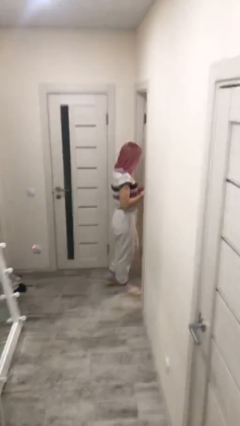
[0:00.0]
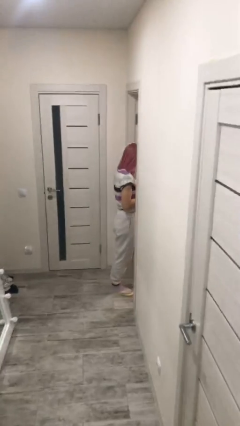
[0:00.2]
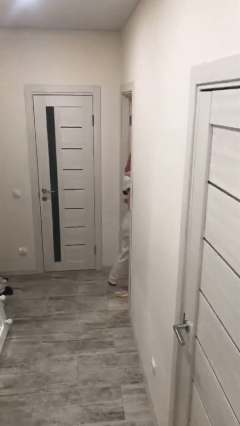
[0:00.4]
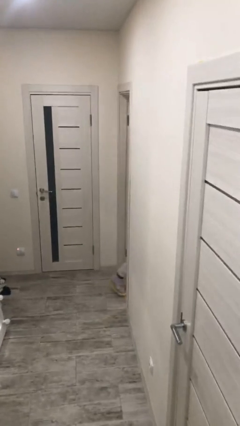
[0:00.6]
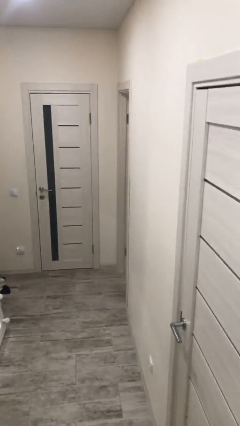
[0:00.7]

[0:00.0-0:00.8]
person enters scene through structure

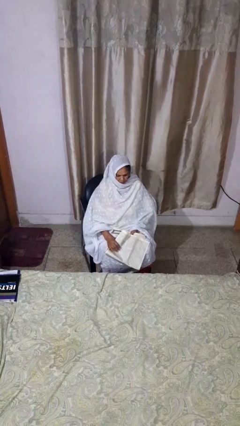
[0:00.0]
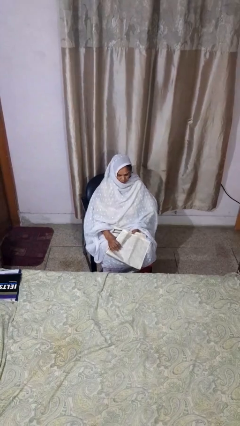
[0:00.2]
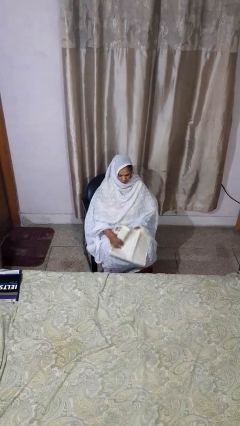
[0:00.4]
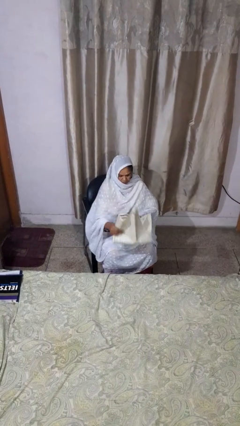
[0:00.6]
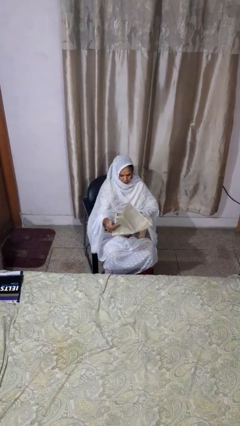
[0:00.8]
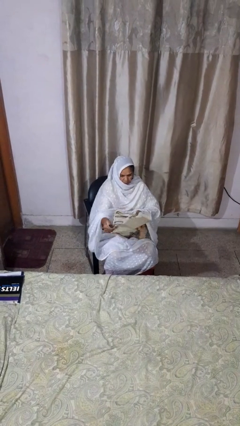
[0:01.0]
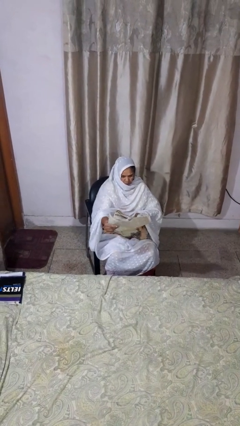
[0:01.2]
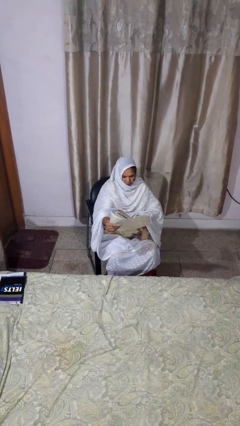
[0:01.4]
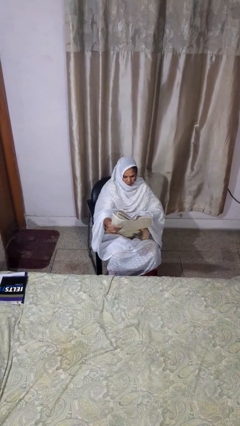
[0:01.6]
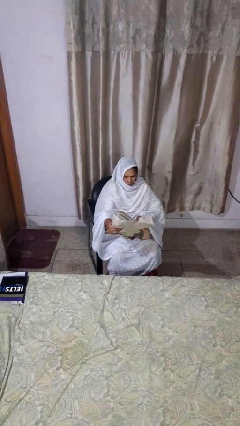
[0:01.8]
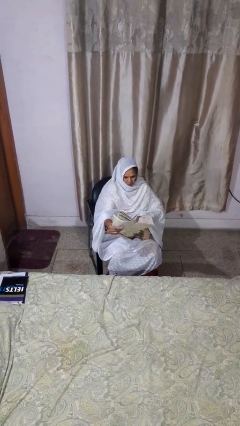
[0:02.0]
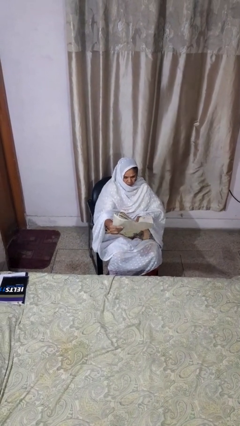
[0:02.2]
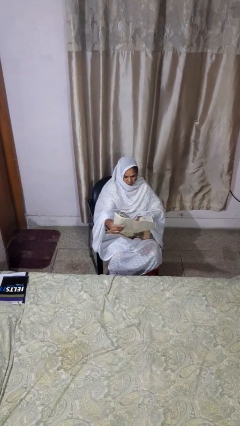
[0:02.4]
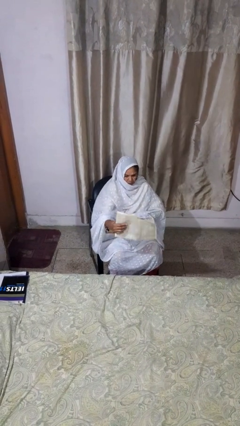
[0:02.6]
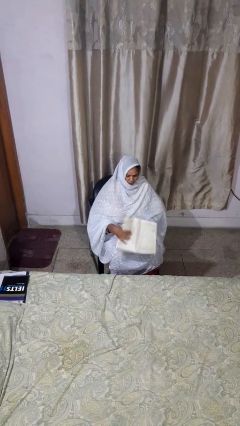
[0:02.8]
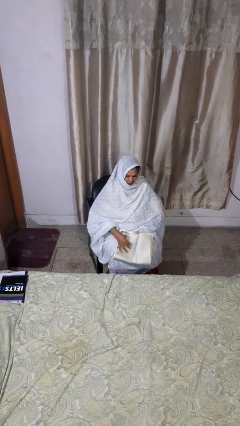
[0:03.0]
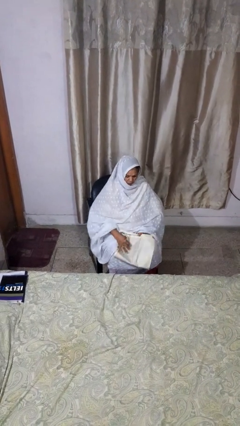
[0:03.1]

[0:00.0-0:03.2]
person reads newspaper

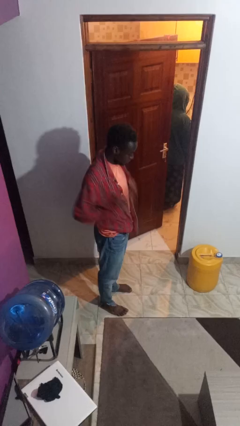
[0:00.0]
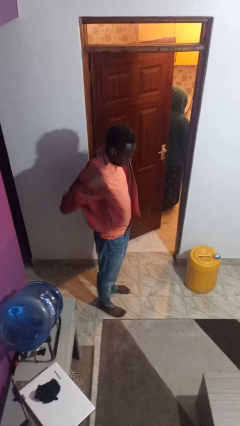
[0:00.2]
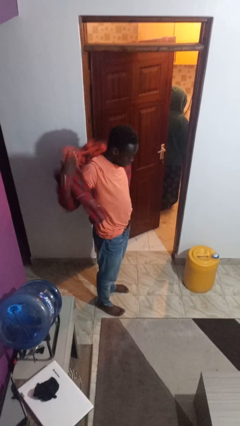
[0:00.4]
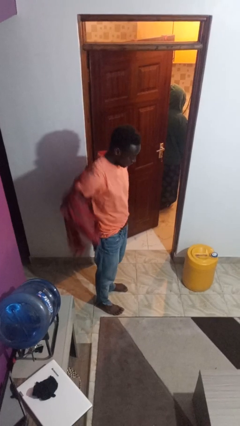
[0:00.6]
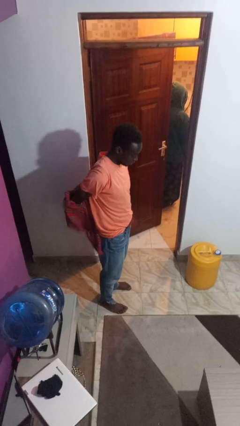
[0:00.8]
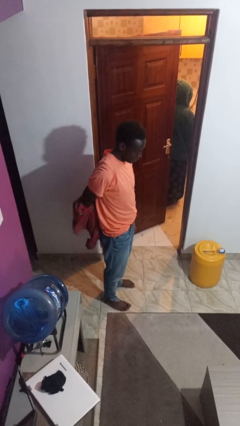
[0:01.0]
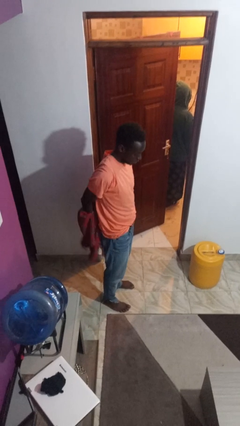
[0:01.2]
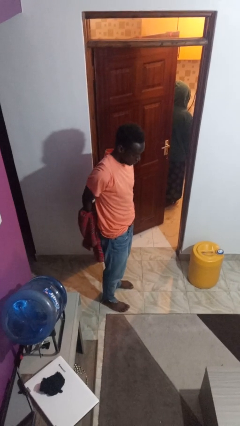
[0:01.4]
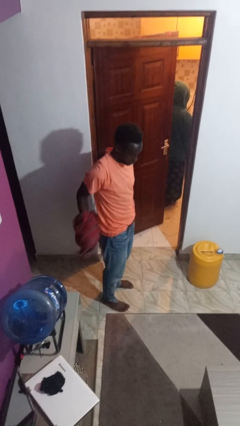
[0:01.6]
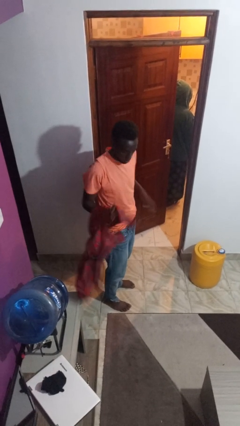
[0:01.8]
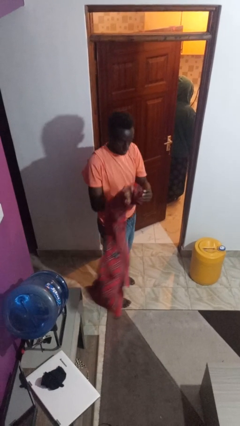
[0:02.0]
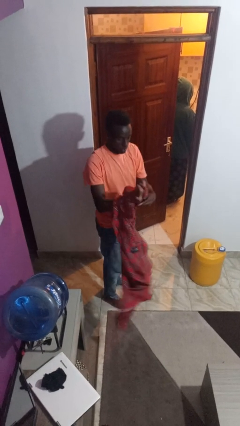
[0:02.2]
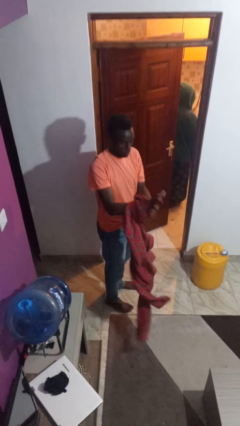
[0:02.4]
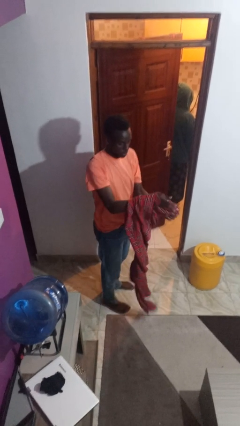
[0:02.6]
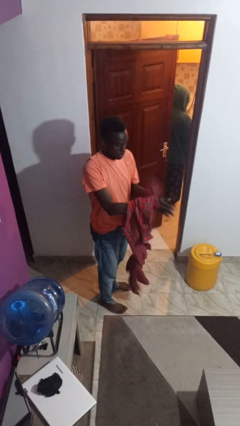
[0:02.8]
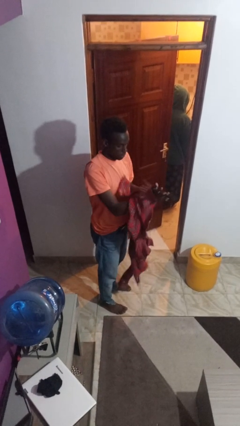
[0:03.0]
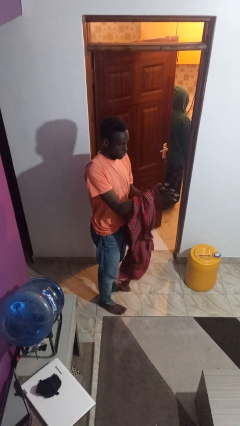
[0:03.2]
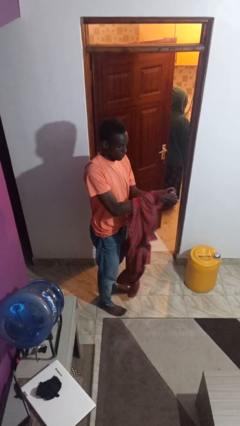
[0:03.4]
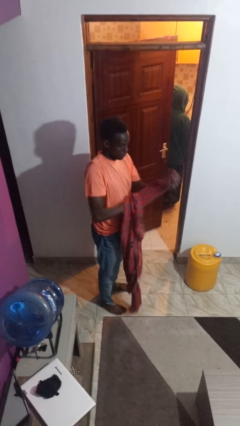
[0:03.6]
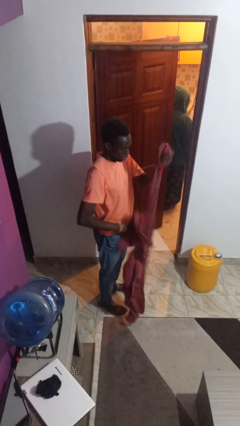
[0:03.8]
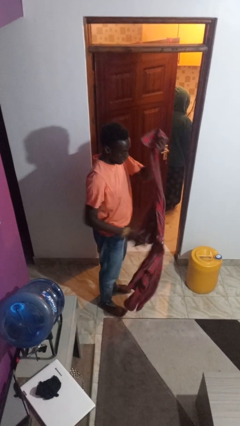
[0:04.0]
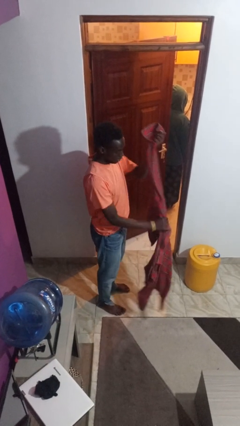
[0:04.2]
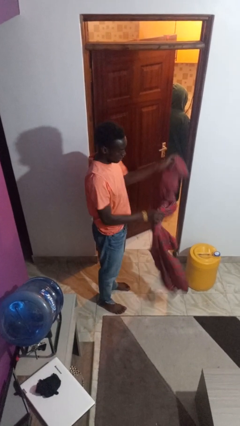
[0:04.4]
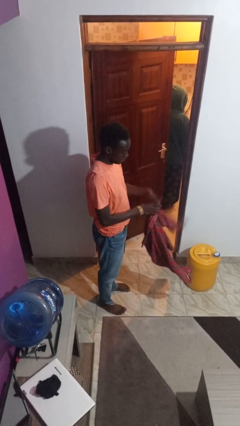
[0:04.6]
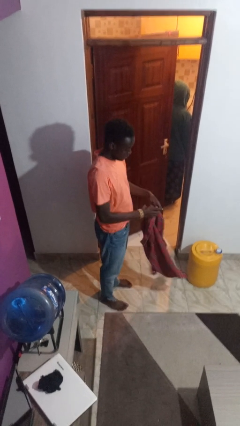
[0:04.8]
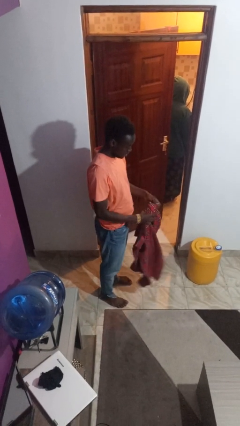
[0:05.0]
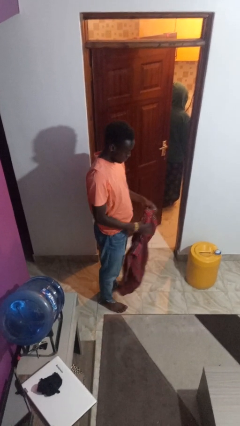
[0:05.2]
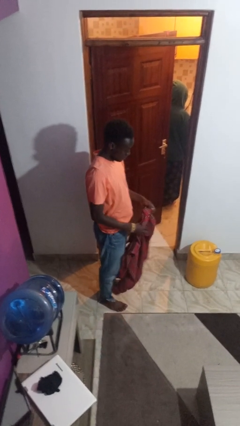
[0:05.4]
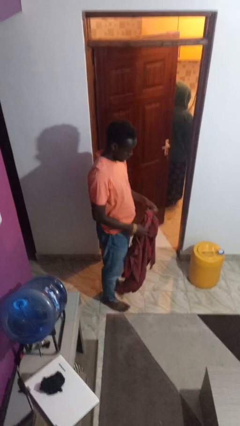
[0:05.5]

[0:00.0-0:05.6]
person takes off shirt

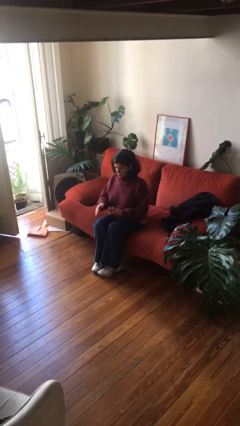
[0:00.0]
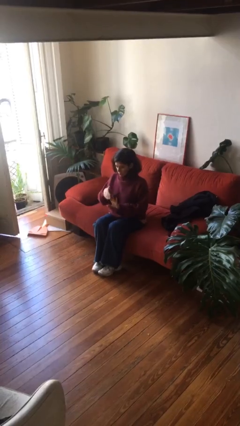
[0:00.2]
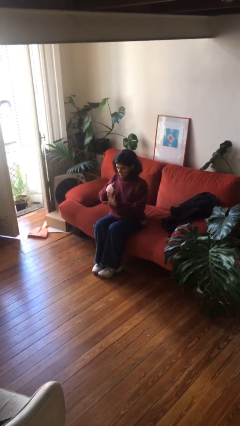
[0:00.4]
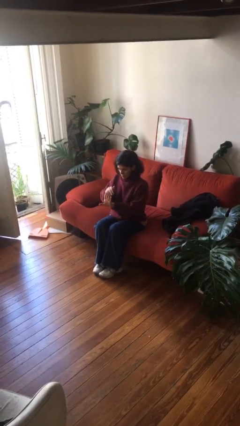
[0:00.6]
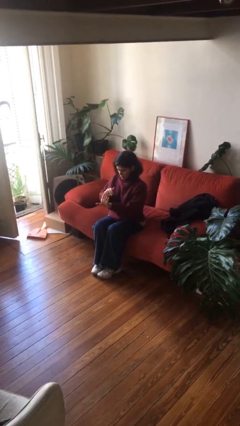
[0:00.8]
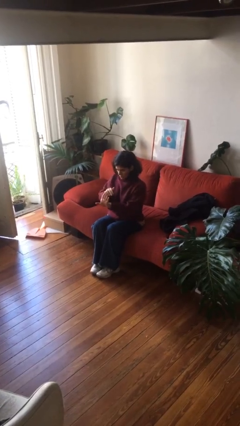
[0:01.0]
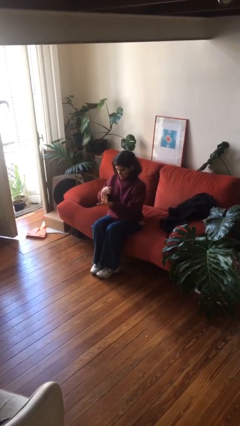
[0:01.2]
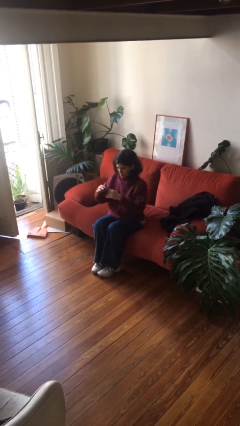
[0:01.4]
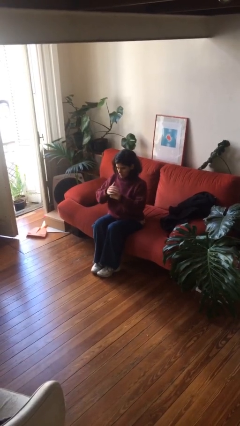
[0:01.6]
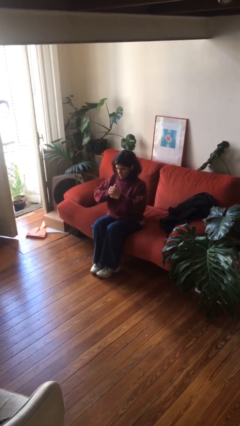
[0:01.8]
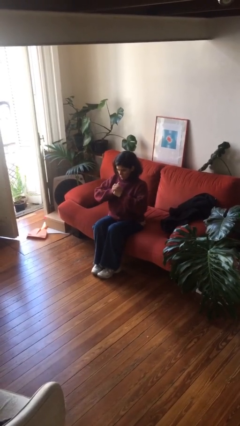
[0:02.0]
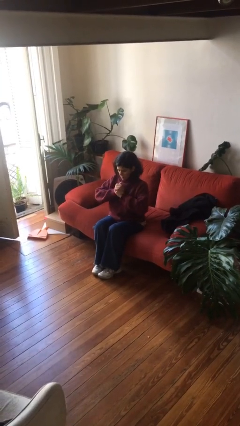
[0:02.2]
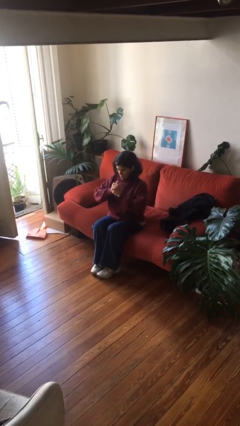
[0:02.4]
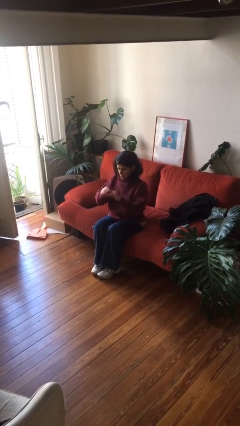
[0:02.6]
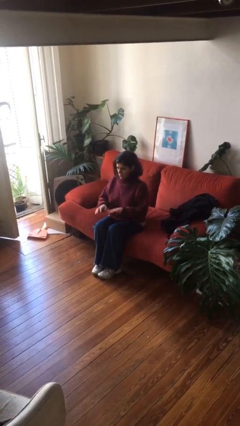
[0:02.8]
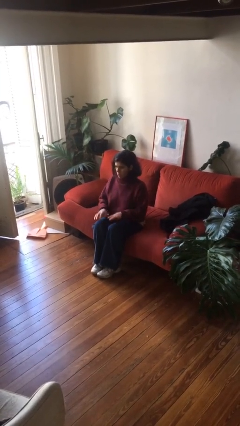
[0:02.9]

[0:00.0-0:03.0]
person cracks knuckles

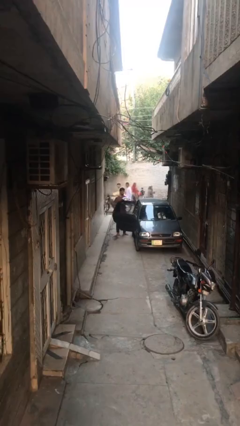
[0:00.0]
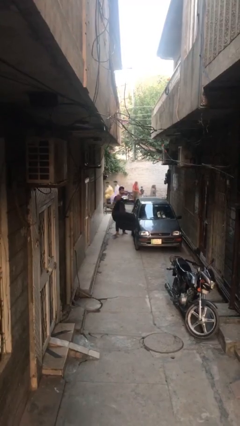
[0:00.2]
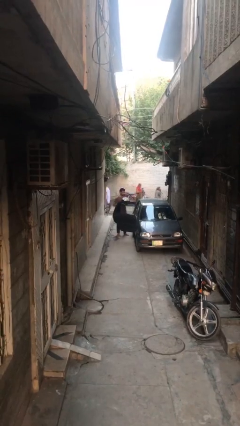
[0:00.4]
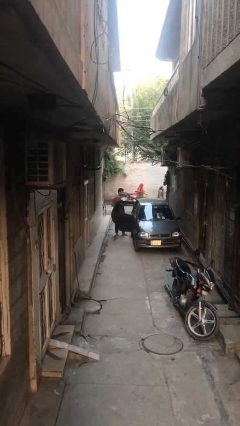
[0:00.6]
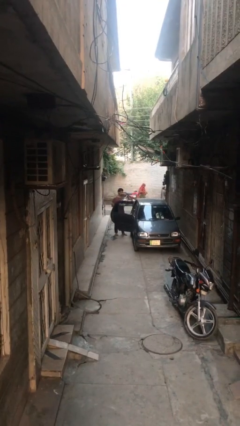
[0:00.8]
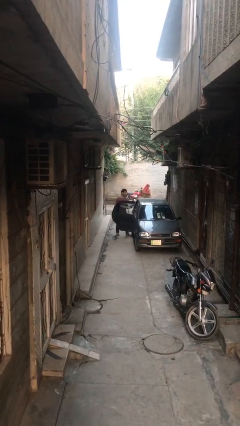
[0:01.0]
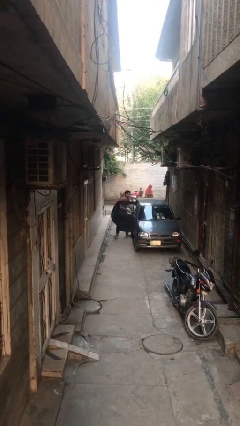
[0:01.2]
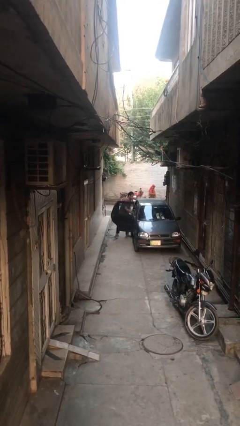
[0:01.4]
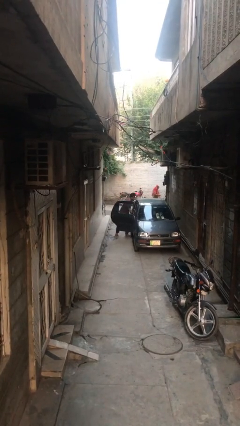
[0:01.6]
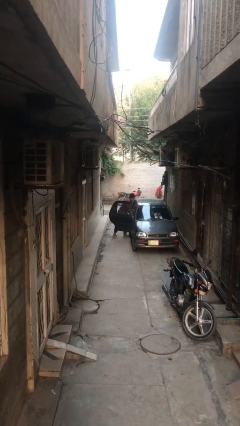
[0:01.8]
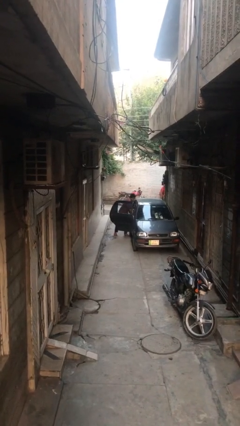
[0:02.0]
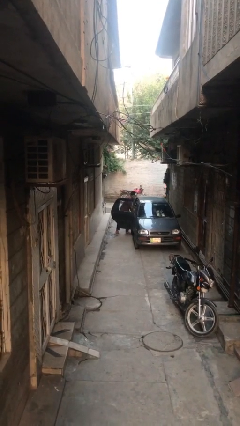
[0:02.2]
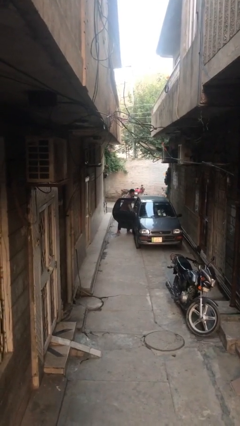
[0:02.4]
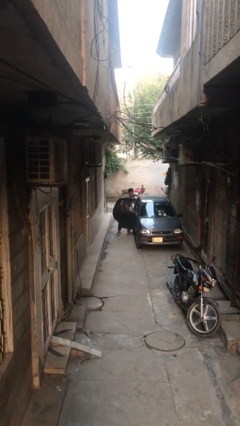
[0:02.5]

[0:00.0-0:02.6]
person loads car

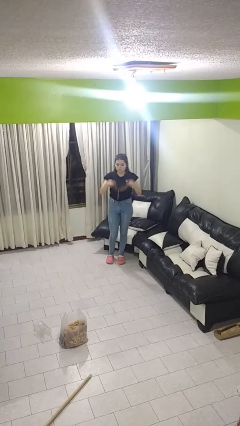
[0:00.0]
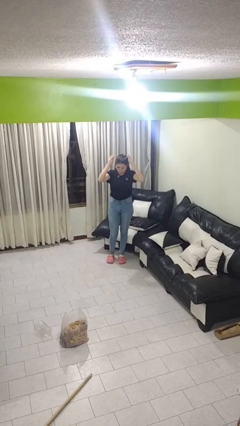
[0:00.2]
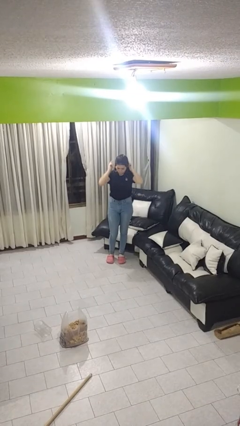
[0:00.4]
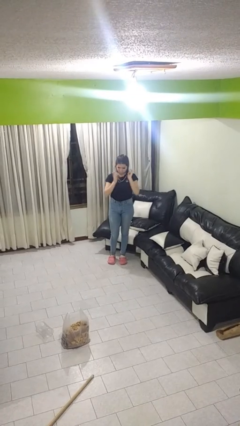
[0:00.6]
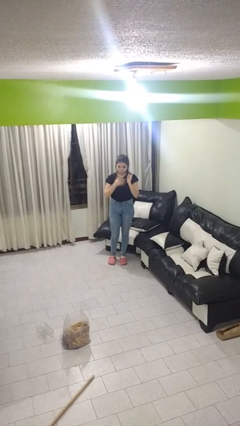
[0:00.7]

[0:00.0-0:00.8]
person puts on necklace

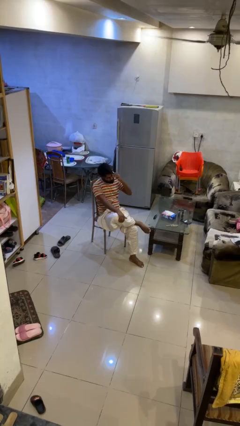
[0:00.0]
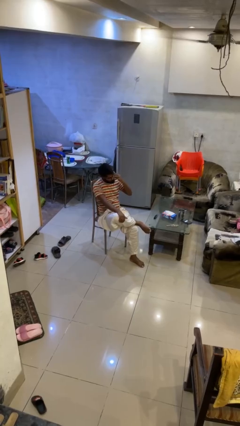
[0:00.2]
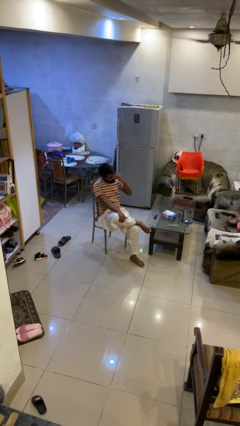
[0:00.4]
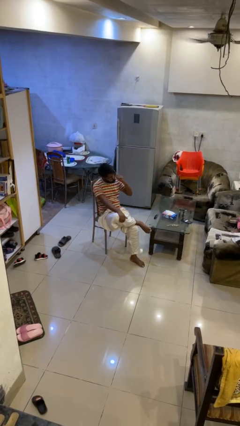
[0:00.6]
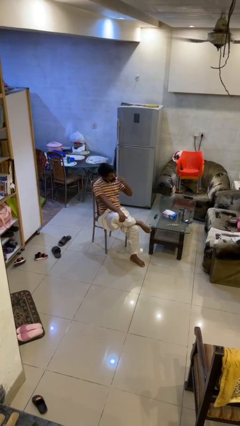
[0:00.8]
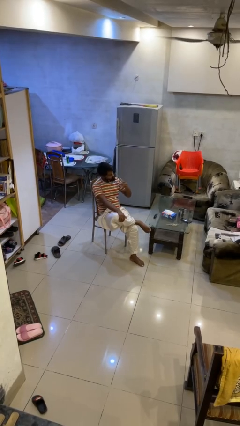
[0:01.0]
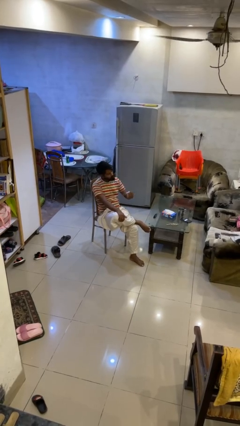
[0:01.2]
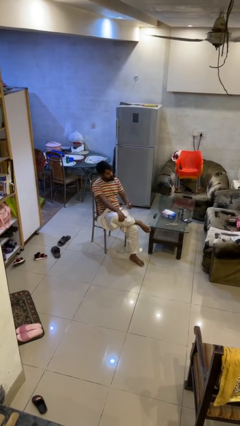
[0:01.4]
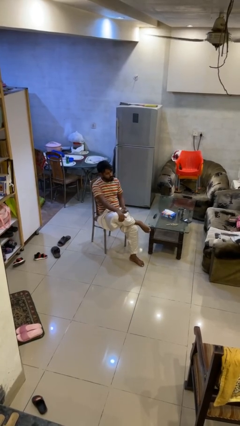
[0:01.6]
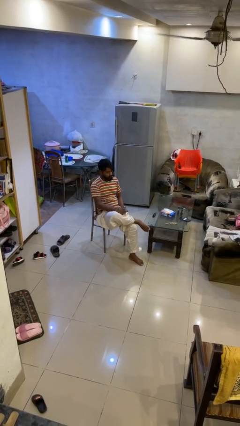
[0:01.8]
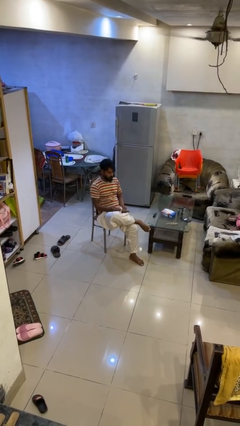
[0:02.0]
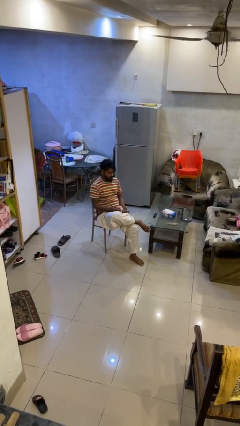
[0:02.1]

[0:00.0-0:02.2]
person takes off glasses
